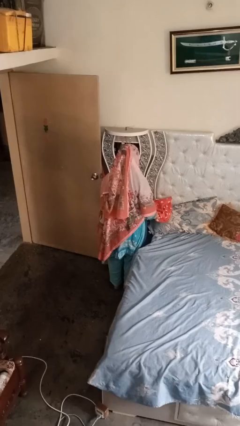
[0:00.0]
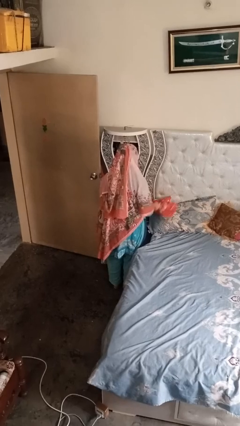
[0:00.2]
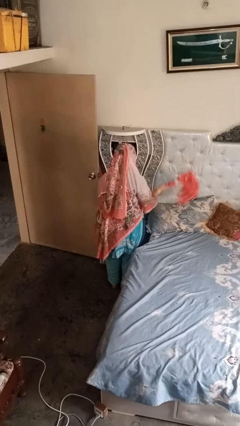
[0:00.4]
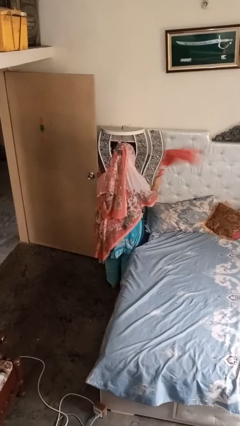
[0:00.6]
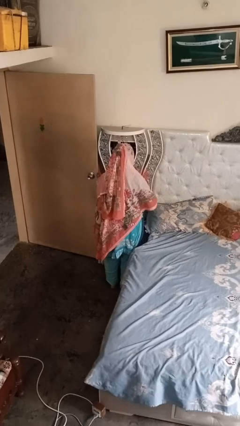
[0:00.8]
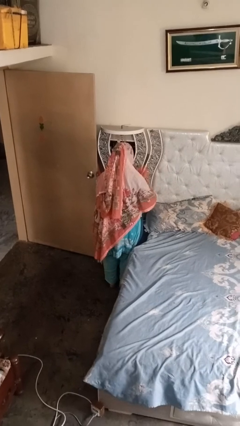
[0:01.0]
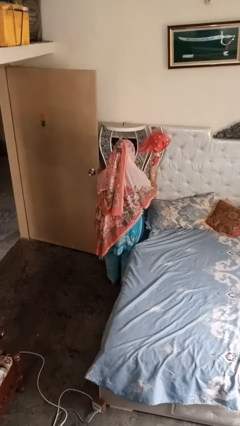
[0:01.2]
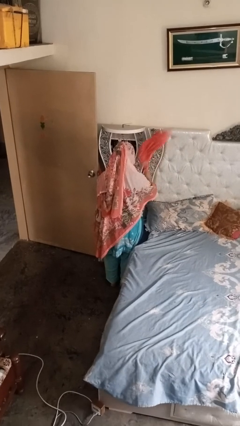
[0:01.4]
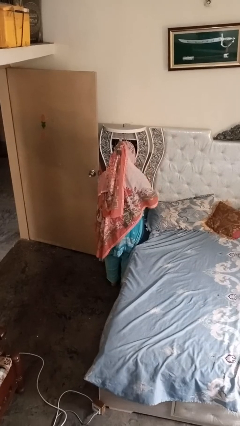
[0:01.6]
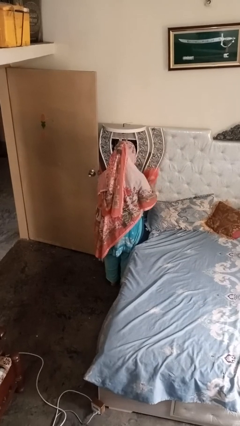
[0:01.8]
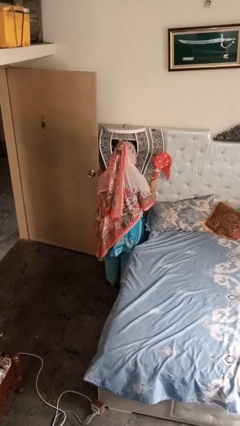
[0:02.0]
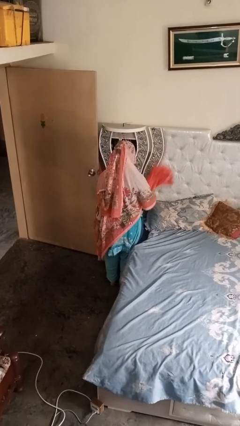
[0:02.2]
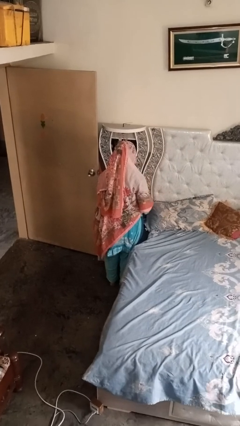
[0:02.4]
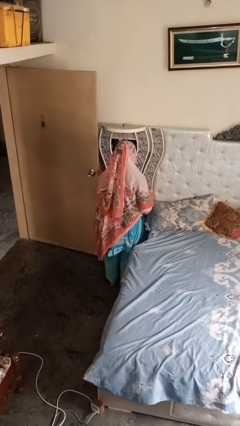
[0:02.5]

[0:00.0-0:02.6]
person dusts furniture

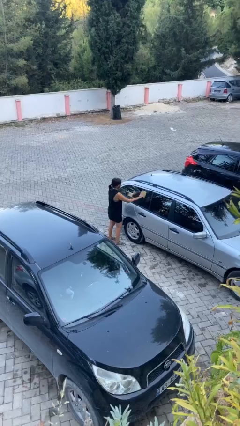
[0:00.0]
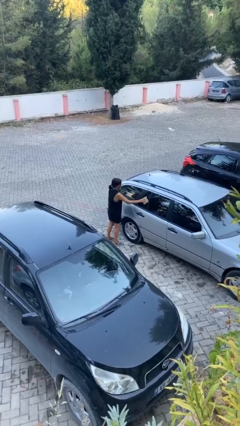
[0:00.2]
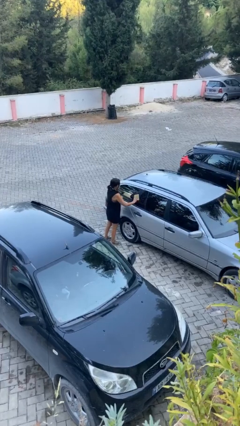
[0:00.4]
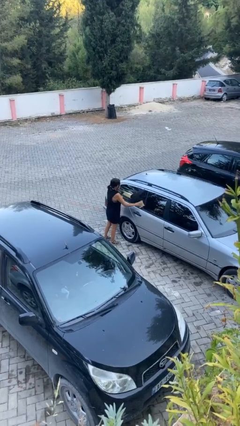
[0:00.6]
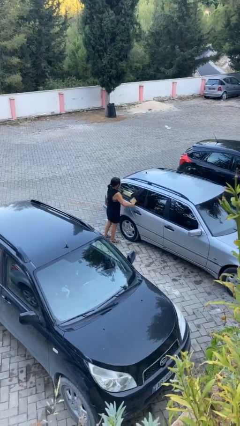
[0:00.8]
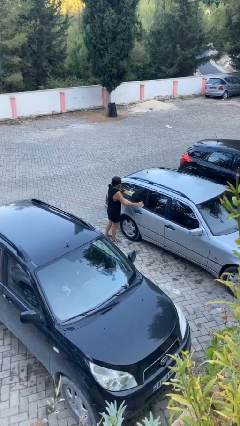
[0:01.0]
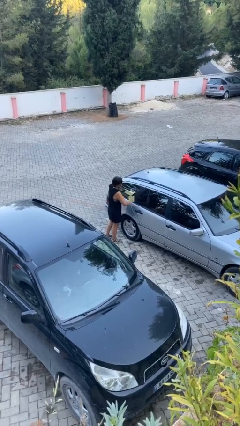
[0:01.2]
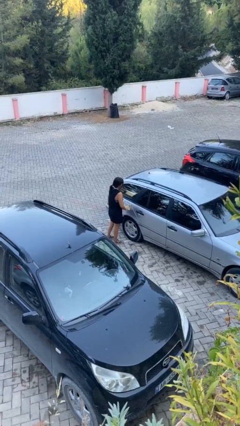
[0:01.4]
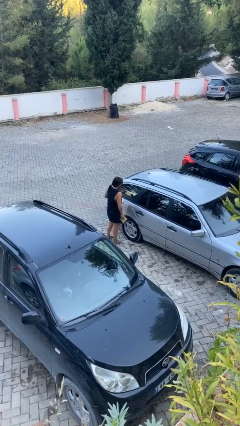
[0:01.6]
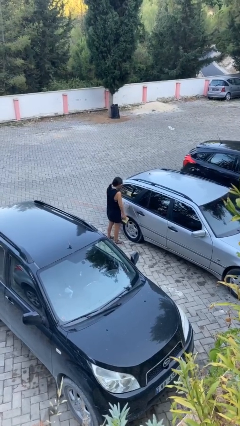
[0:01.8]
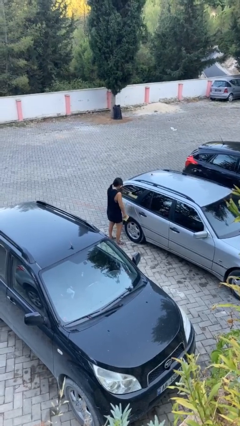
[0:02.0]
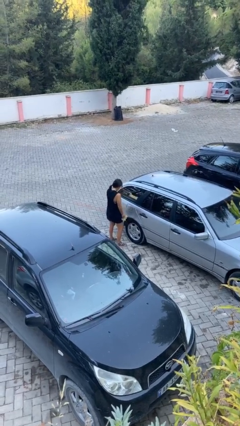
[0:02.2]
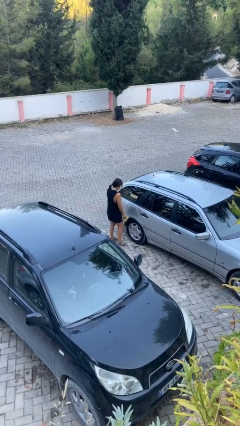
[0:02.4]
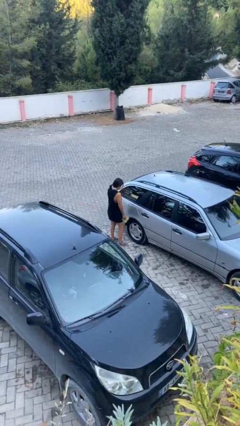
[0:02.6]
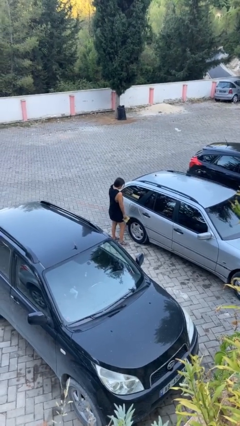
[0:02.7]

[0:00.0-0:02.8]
person polishes car with rag

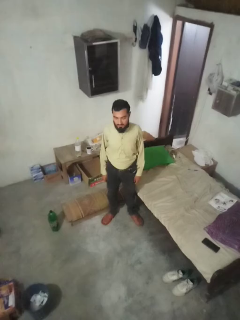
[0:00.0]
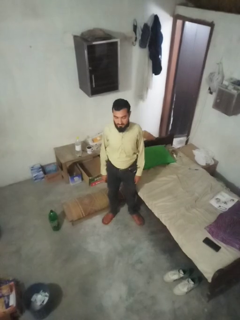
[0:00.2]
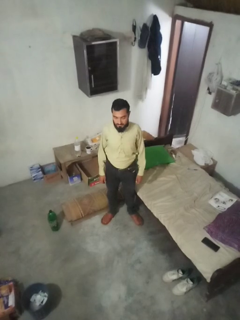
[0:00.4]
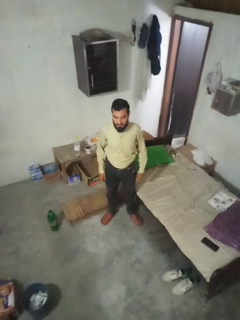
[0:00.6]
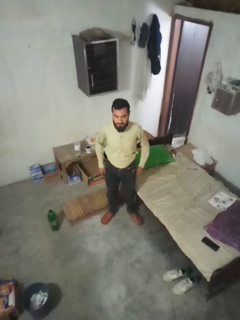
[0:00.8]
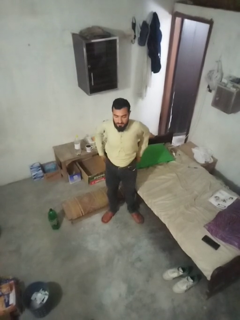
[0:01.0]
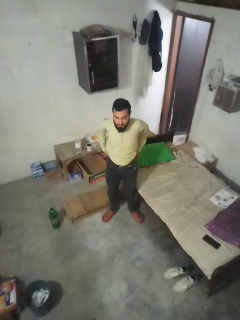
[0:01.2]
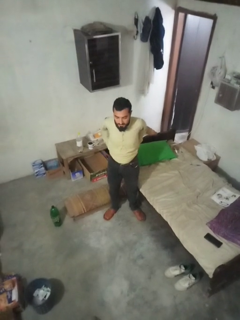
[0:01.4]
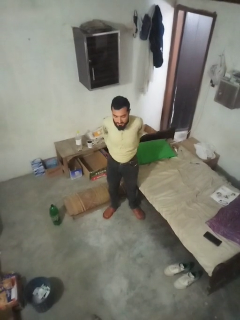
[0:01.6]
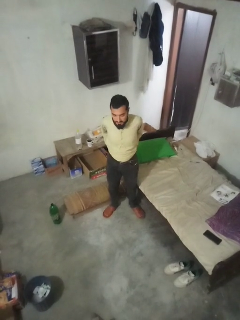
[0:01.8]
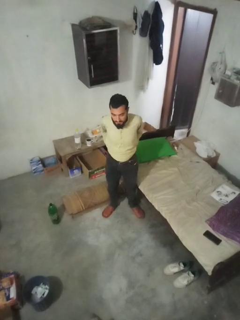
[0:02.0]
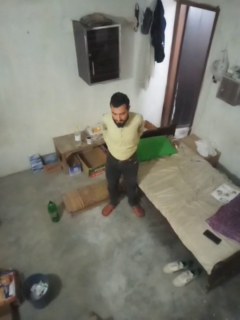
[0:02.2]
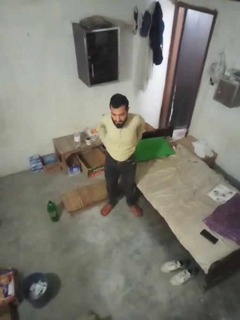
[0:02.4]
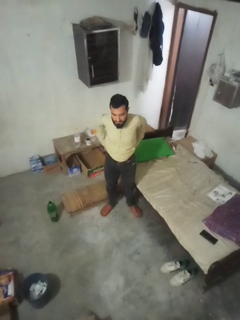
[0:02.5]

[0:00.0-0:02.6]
person puts hands in back pockets

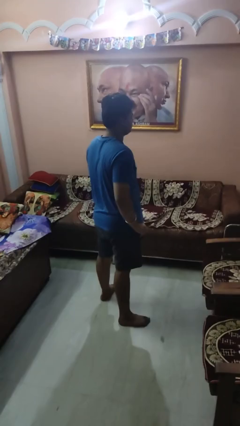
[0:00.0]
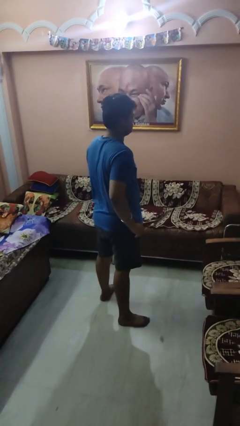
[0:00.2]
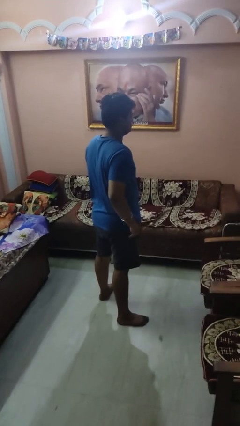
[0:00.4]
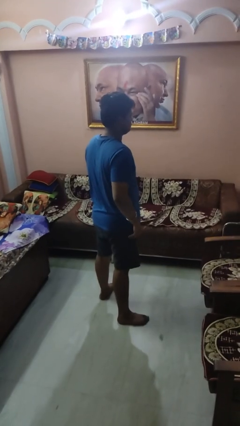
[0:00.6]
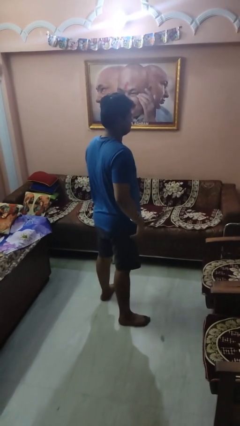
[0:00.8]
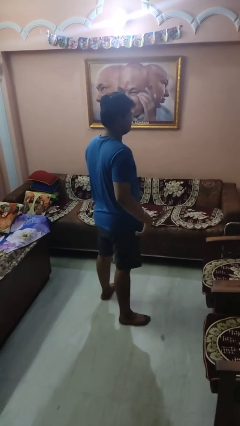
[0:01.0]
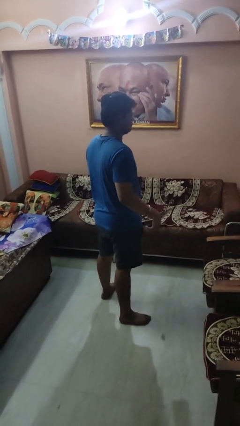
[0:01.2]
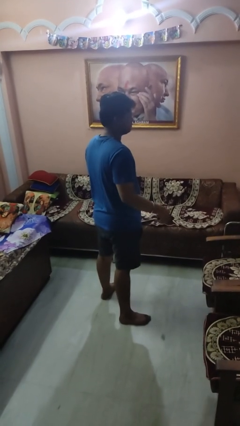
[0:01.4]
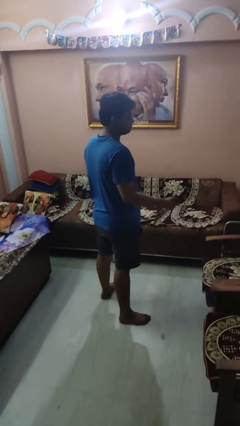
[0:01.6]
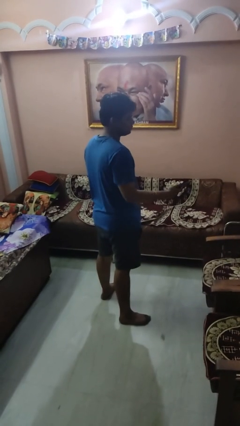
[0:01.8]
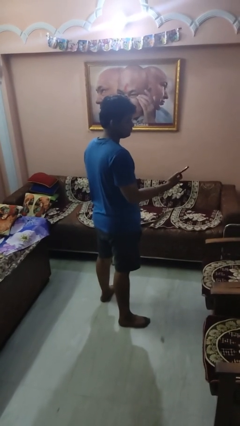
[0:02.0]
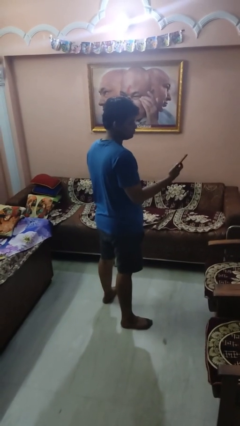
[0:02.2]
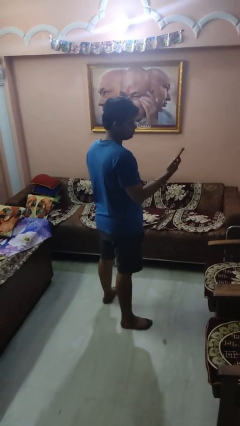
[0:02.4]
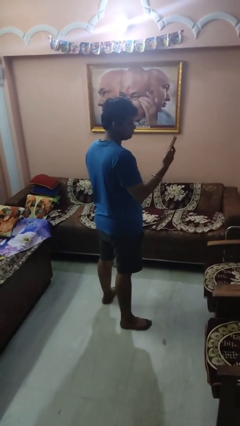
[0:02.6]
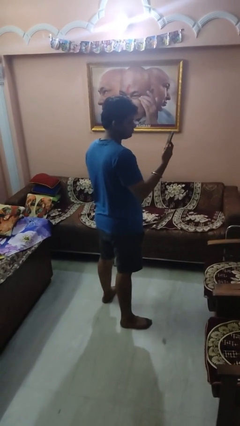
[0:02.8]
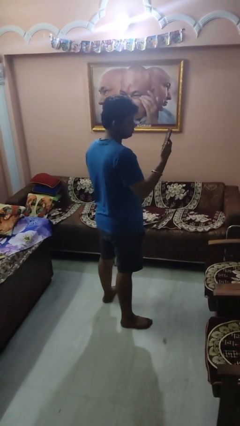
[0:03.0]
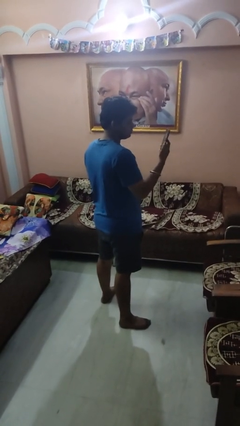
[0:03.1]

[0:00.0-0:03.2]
person takes phone from pocket

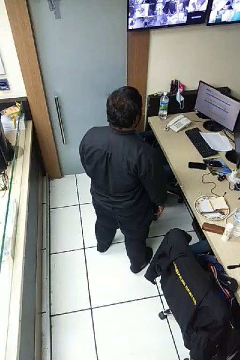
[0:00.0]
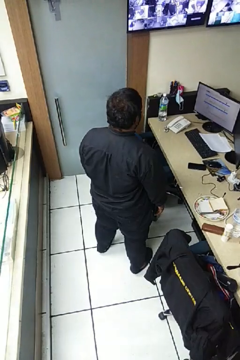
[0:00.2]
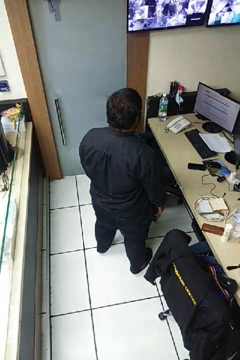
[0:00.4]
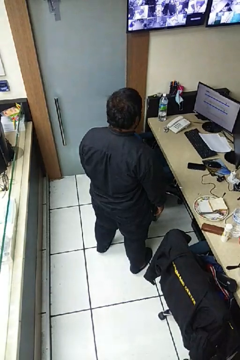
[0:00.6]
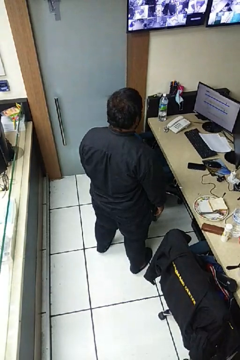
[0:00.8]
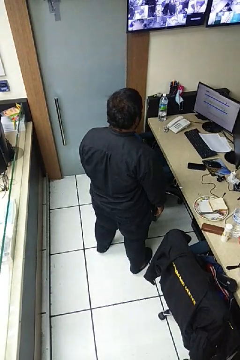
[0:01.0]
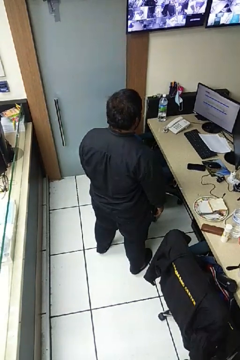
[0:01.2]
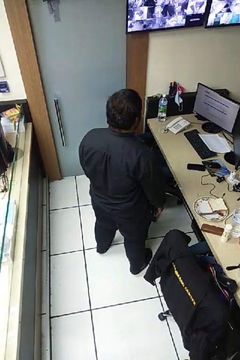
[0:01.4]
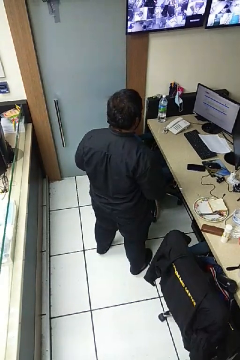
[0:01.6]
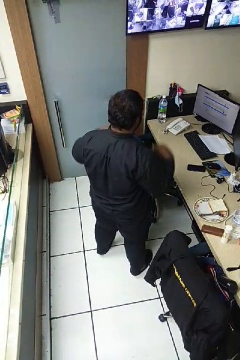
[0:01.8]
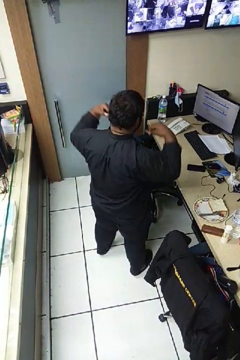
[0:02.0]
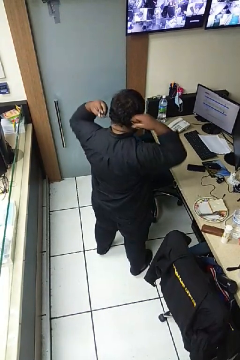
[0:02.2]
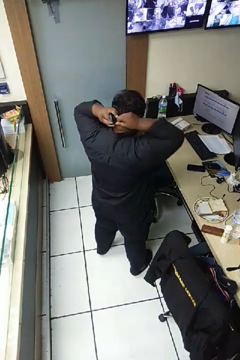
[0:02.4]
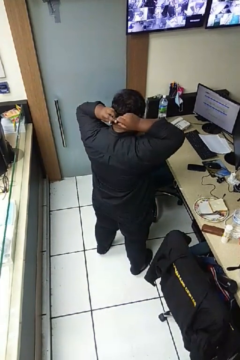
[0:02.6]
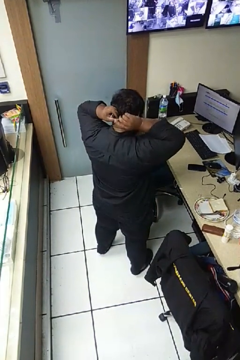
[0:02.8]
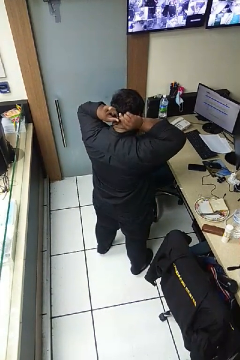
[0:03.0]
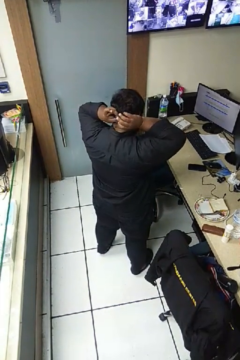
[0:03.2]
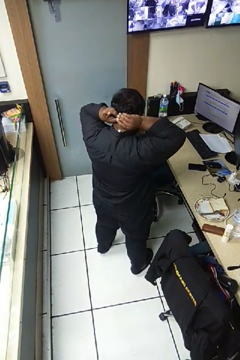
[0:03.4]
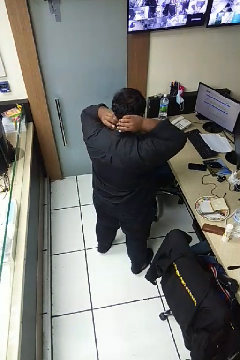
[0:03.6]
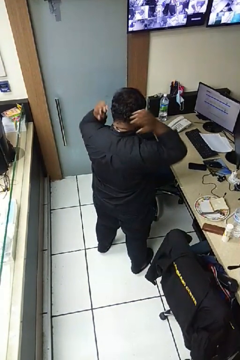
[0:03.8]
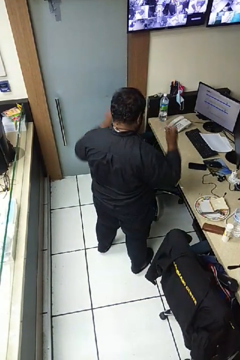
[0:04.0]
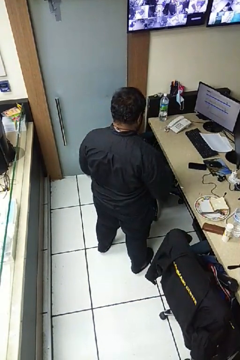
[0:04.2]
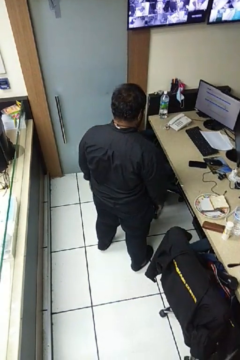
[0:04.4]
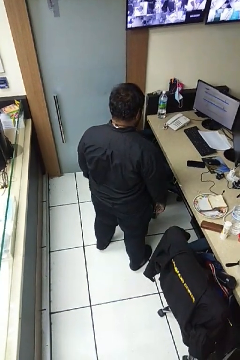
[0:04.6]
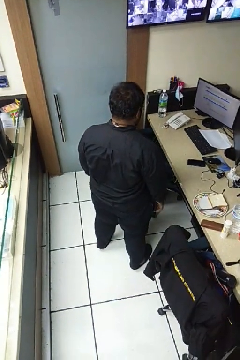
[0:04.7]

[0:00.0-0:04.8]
person puts on necklace

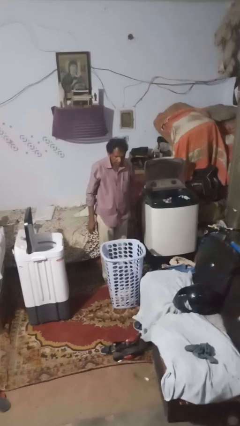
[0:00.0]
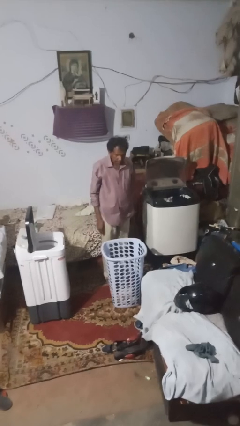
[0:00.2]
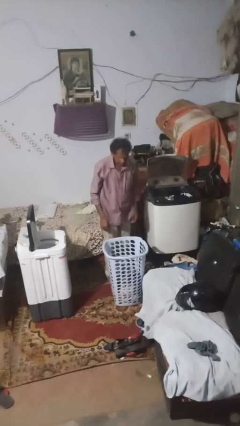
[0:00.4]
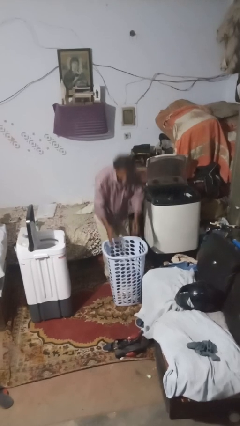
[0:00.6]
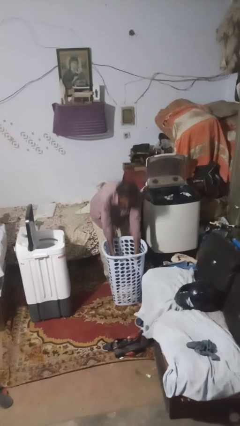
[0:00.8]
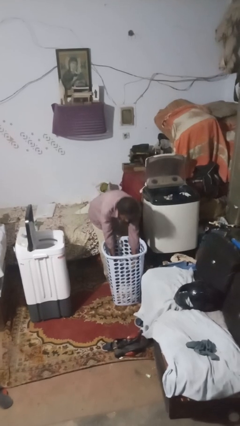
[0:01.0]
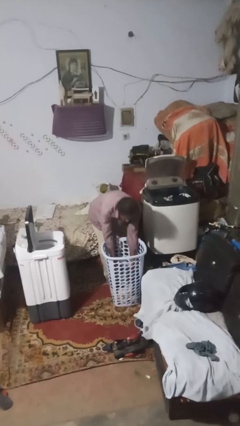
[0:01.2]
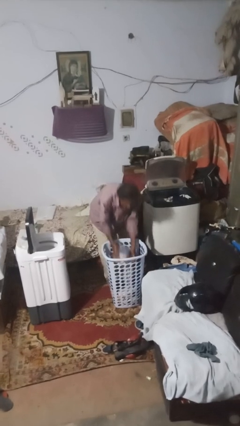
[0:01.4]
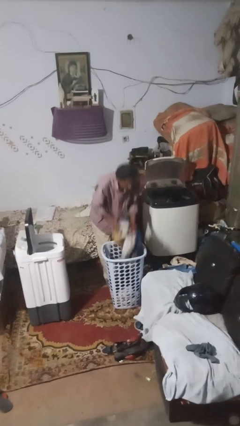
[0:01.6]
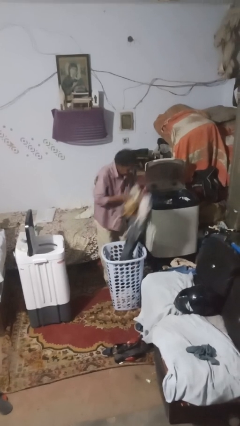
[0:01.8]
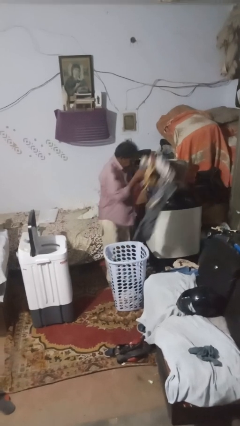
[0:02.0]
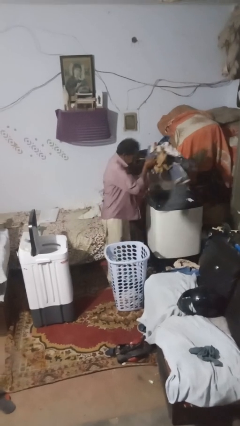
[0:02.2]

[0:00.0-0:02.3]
person loads clotheswasher

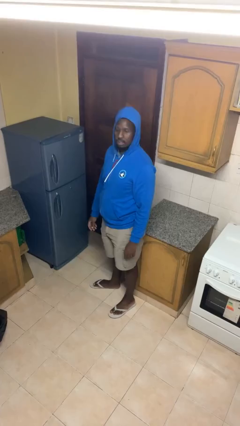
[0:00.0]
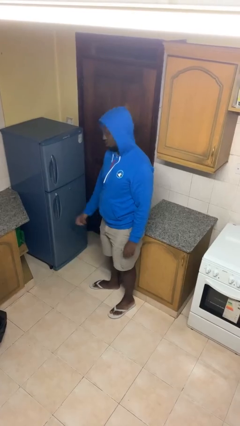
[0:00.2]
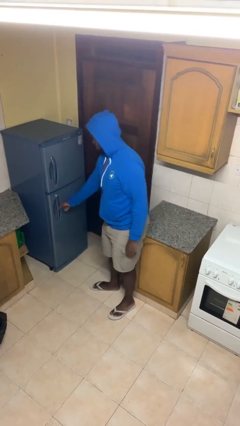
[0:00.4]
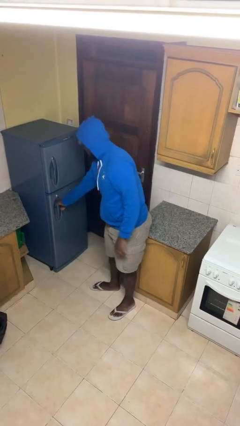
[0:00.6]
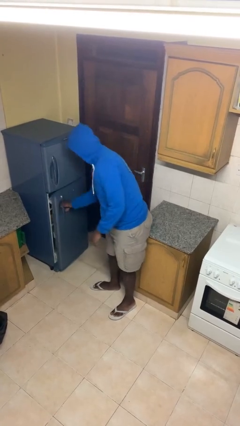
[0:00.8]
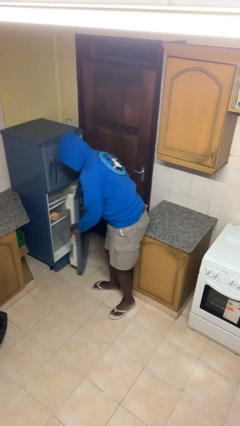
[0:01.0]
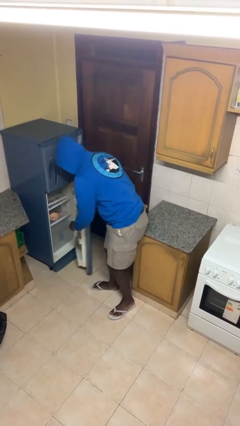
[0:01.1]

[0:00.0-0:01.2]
person takes object from refrigerator
